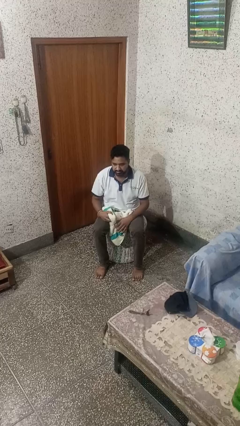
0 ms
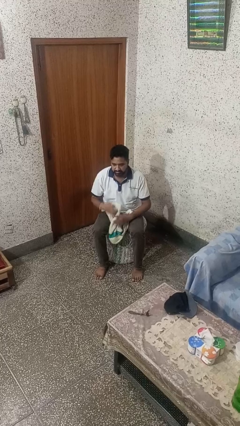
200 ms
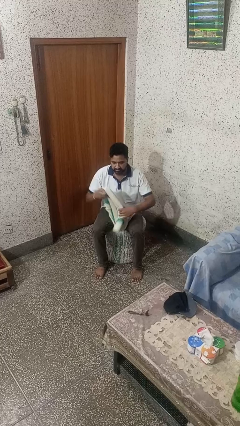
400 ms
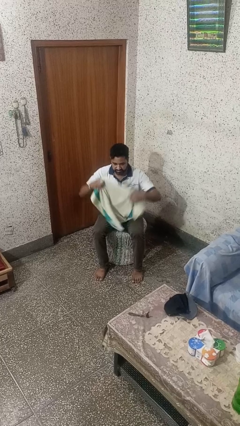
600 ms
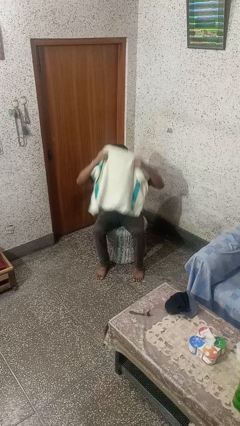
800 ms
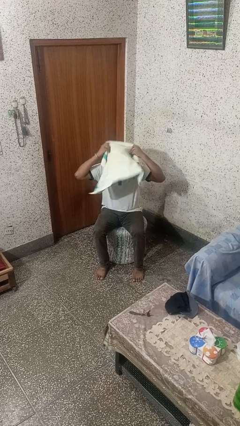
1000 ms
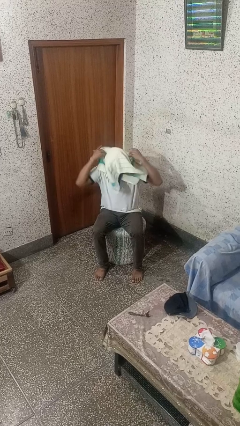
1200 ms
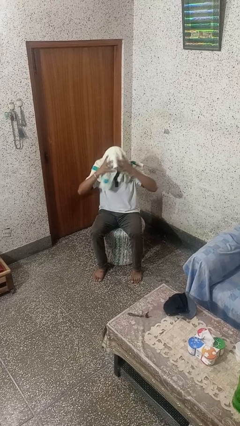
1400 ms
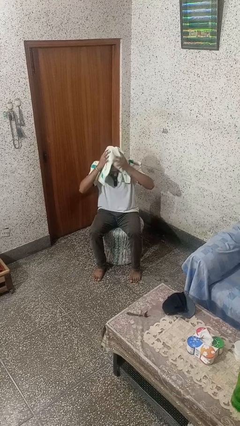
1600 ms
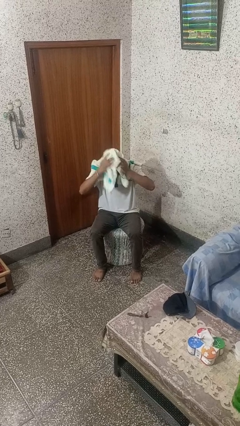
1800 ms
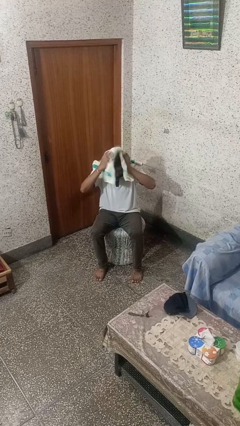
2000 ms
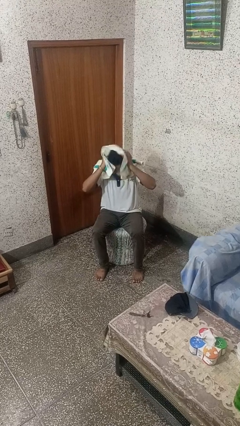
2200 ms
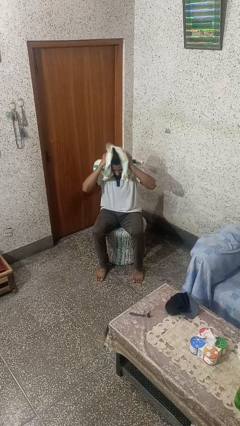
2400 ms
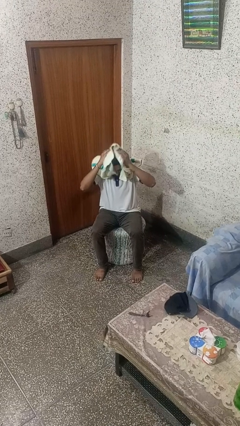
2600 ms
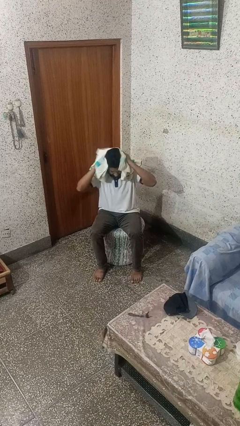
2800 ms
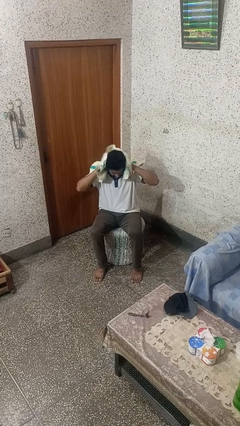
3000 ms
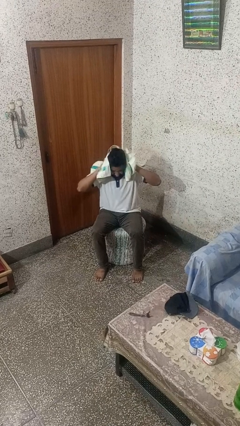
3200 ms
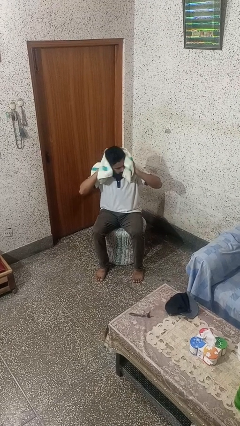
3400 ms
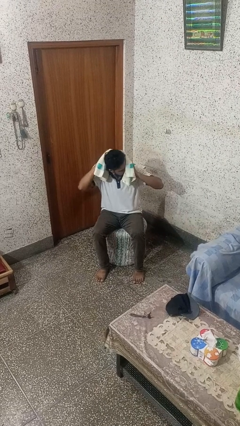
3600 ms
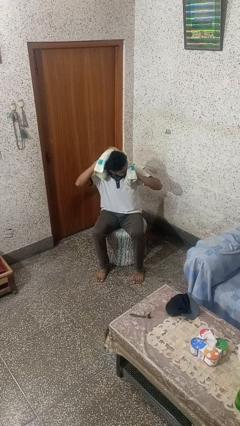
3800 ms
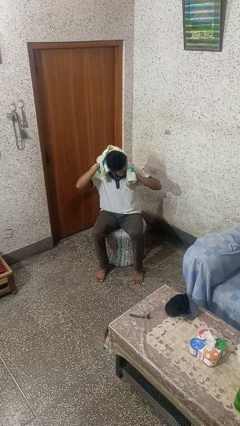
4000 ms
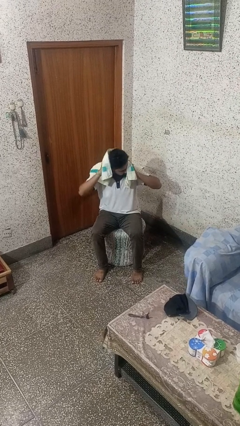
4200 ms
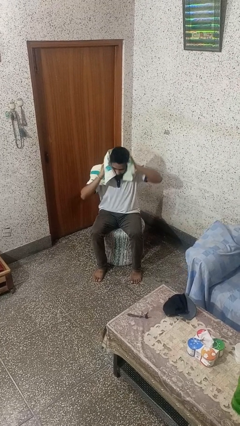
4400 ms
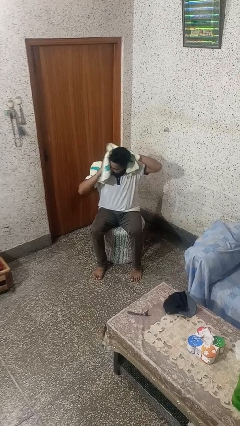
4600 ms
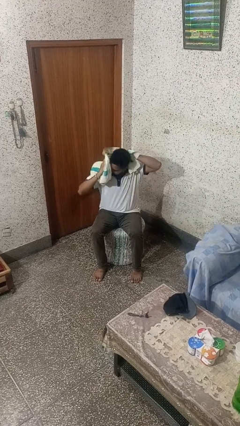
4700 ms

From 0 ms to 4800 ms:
person dries hair with towel

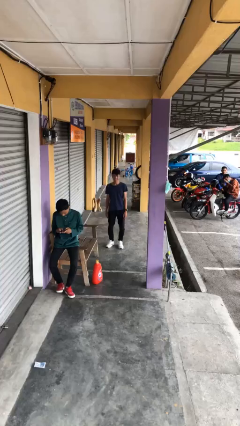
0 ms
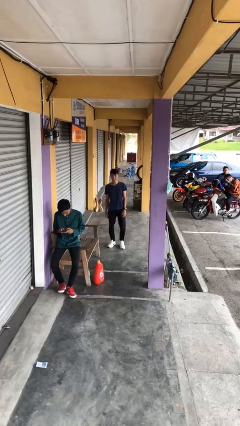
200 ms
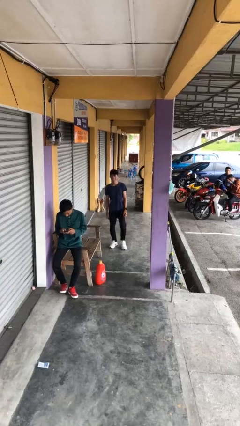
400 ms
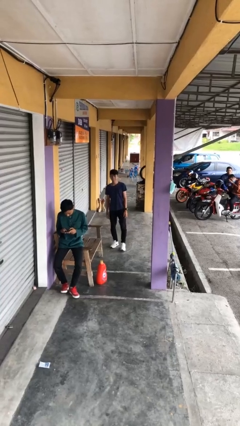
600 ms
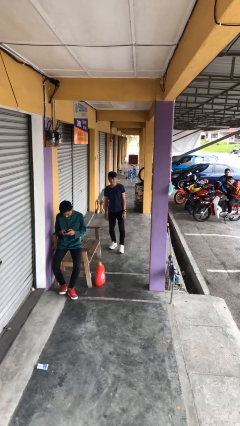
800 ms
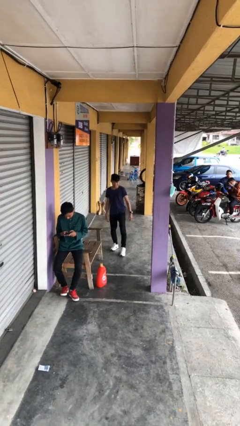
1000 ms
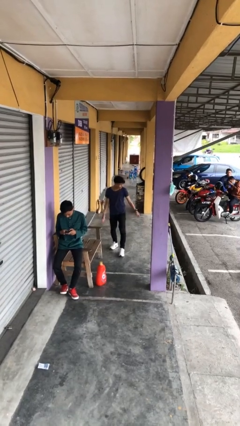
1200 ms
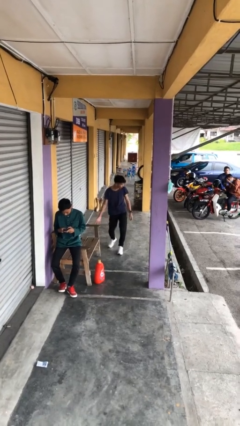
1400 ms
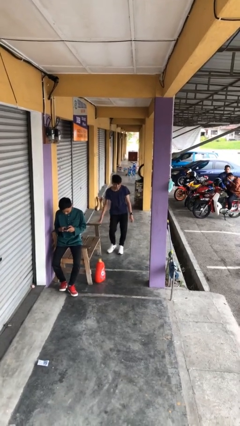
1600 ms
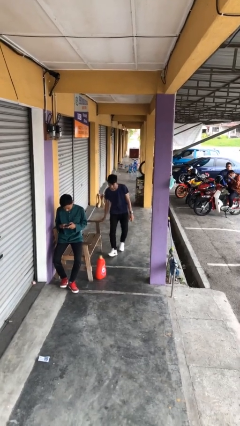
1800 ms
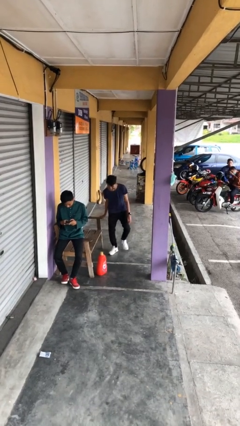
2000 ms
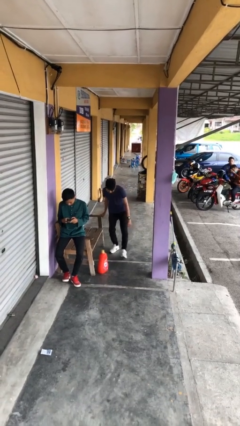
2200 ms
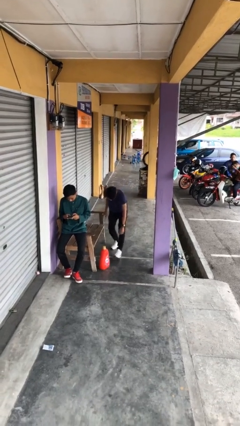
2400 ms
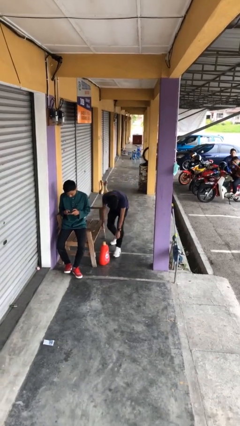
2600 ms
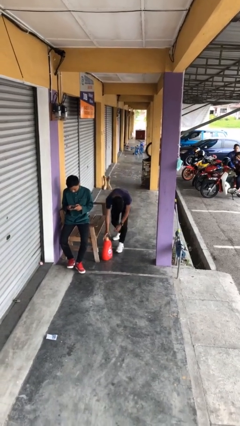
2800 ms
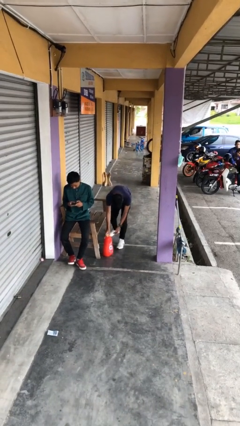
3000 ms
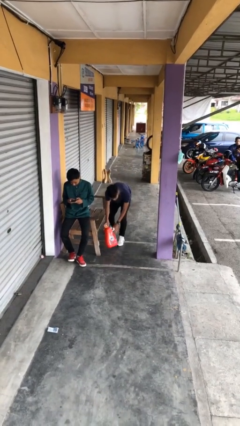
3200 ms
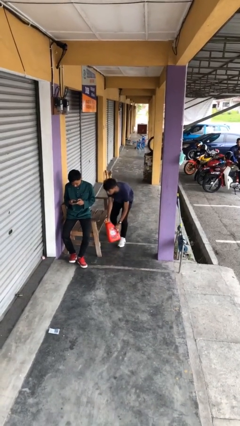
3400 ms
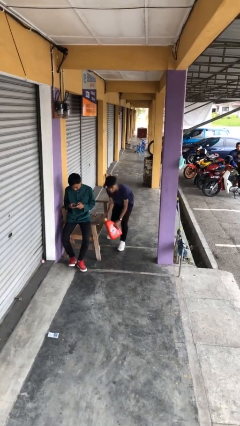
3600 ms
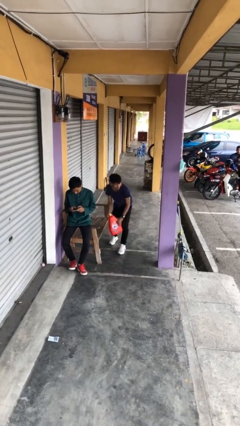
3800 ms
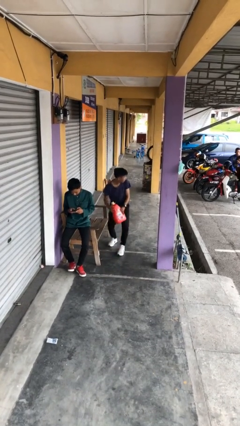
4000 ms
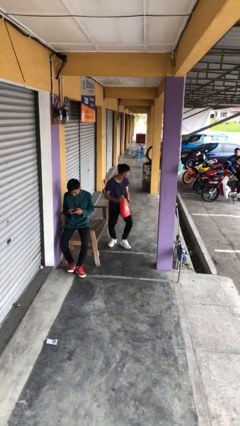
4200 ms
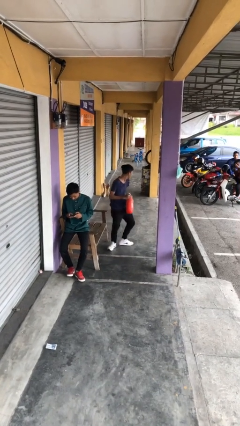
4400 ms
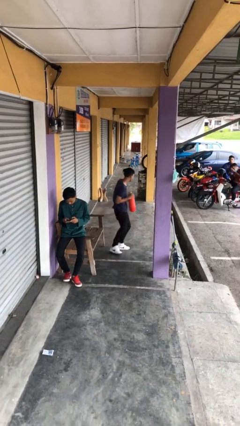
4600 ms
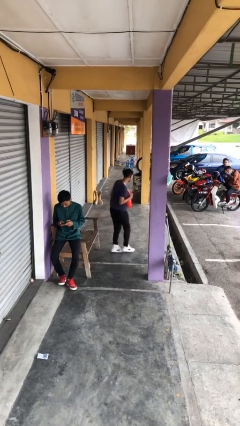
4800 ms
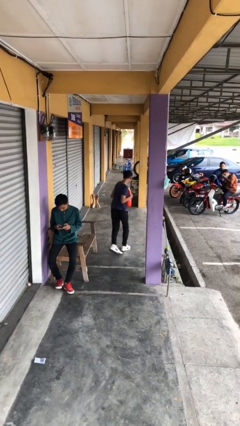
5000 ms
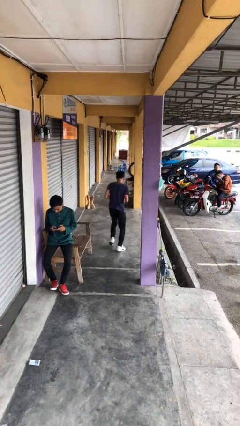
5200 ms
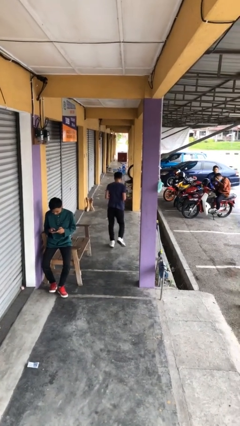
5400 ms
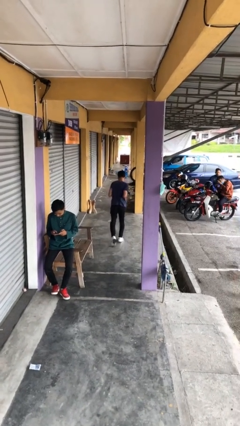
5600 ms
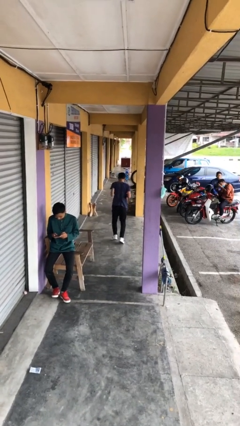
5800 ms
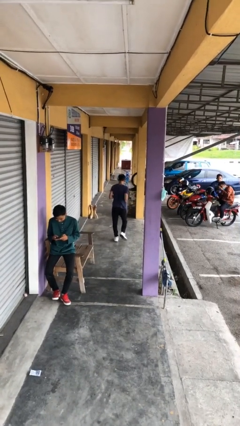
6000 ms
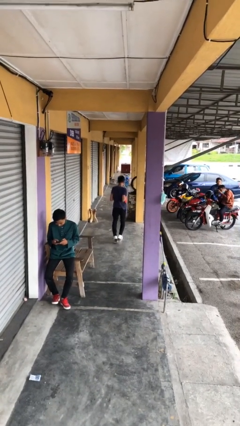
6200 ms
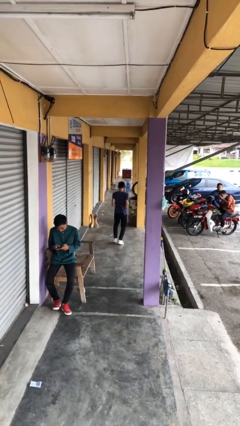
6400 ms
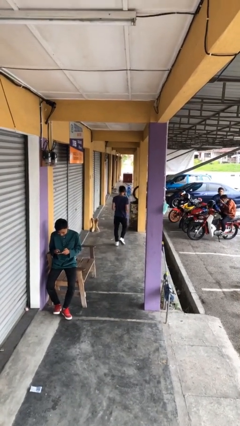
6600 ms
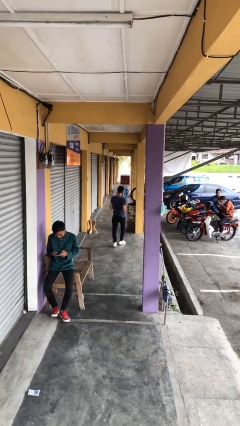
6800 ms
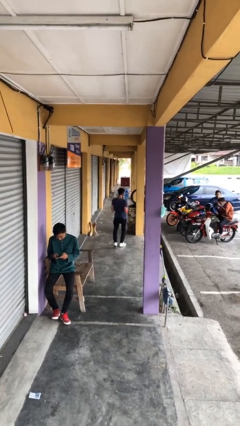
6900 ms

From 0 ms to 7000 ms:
person steals object from person

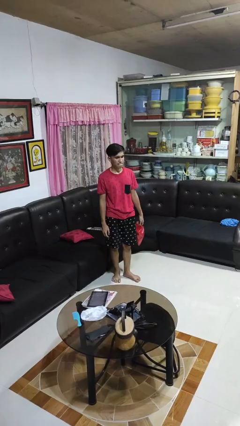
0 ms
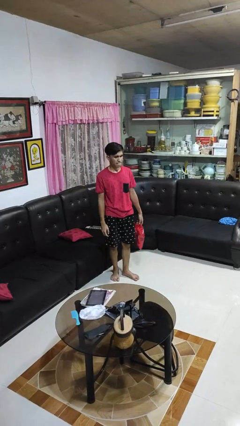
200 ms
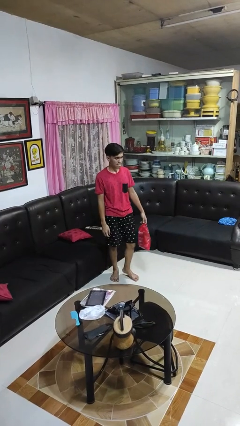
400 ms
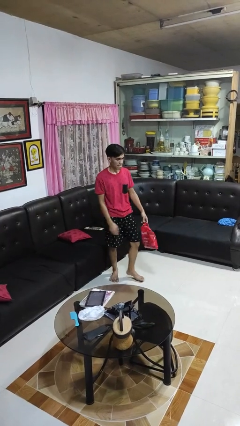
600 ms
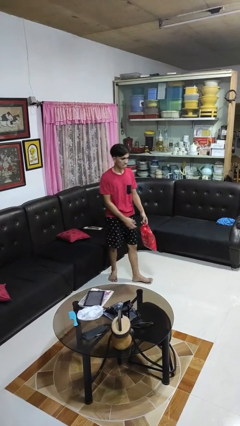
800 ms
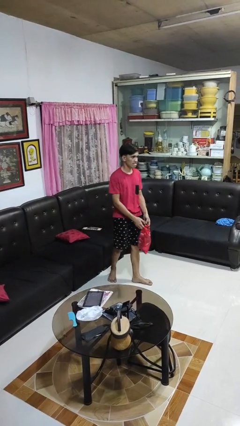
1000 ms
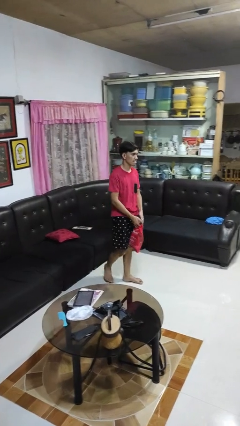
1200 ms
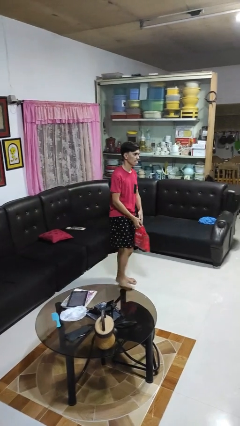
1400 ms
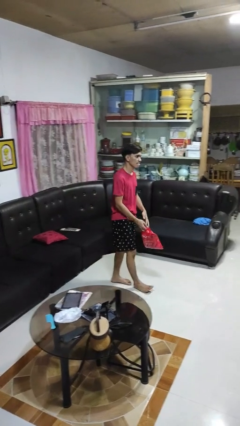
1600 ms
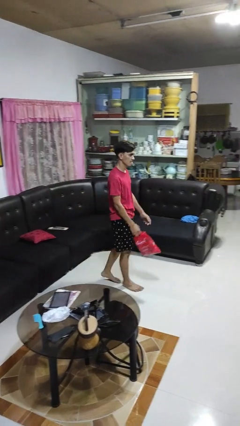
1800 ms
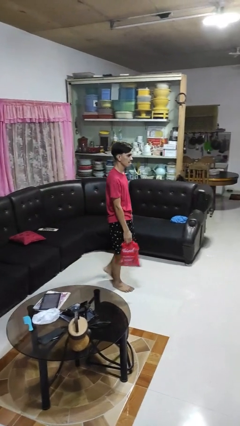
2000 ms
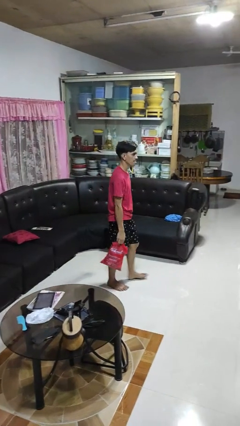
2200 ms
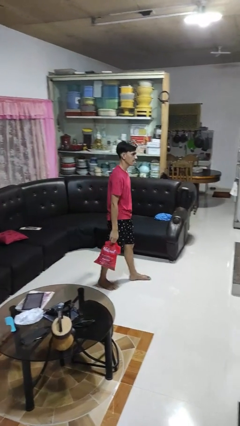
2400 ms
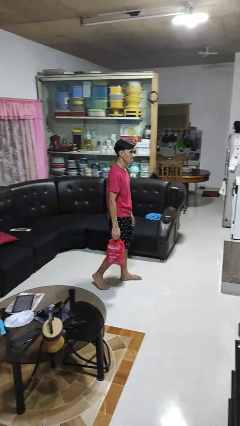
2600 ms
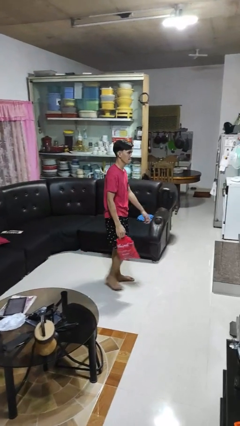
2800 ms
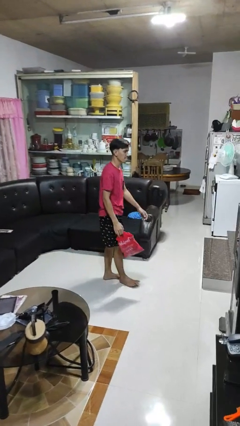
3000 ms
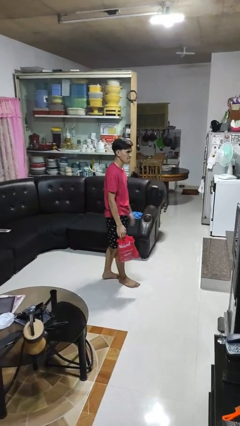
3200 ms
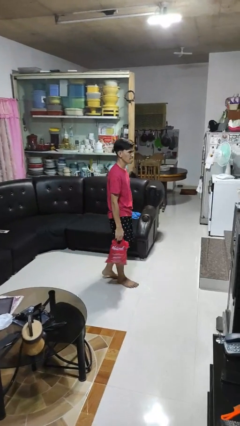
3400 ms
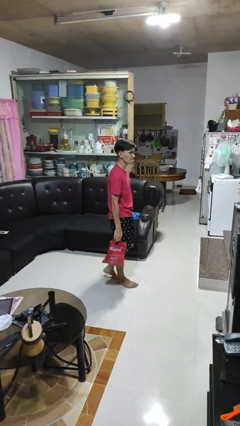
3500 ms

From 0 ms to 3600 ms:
person carries groceries

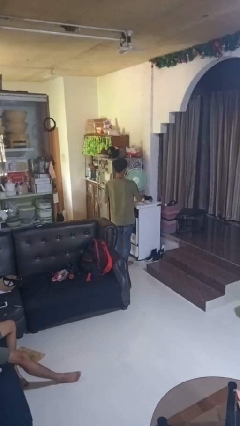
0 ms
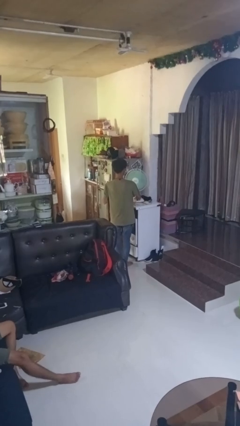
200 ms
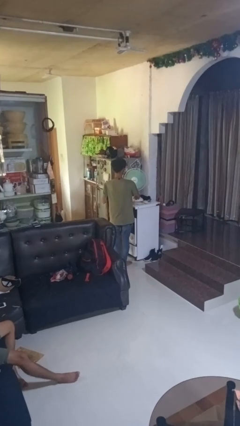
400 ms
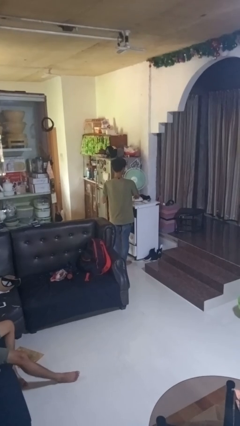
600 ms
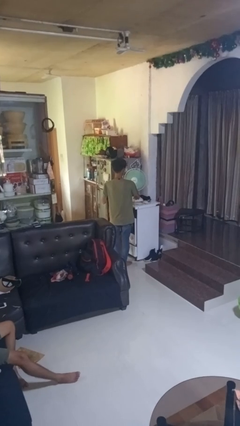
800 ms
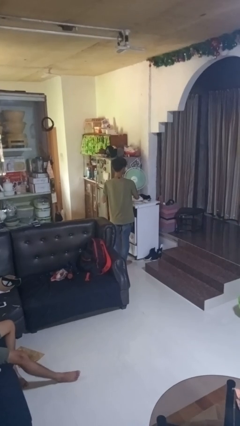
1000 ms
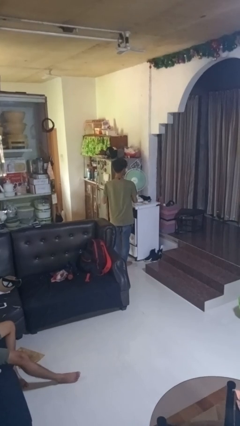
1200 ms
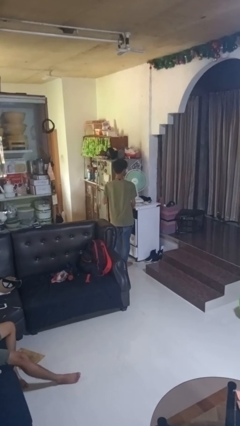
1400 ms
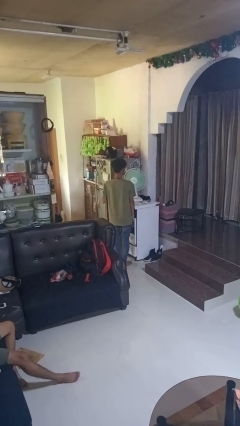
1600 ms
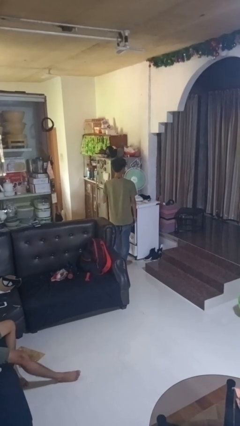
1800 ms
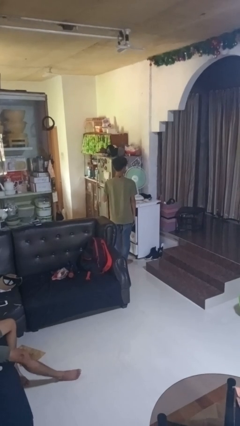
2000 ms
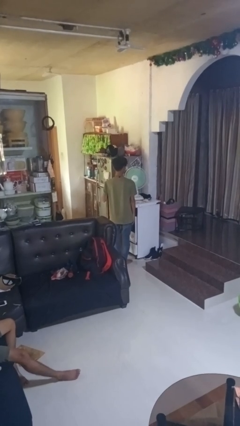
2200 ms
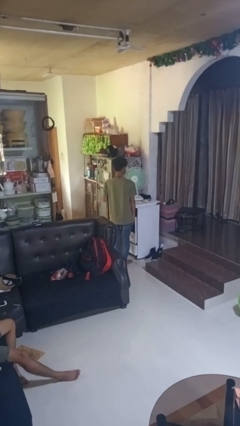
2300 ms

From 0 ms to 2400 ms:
person turns off fan
